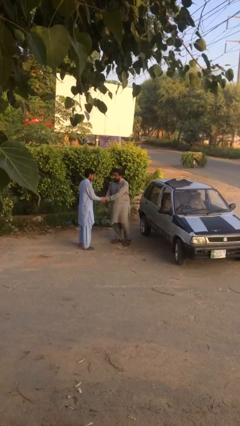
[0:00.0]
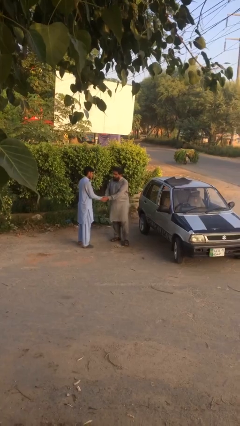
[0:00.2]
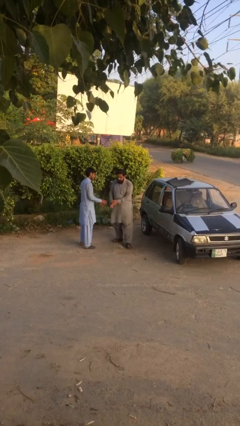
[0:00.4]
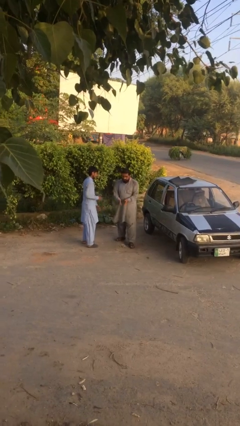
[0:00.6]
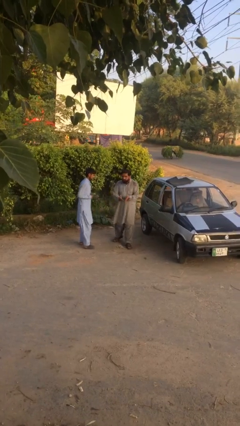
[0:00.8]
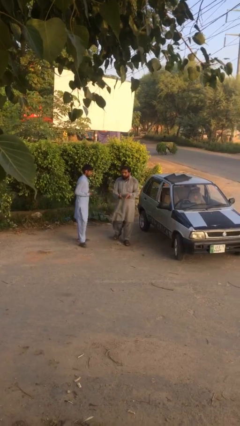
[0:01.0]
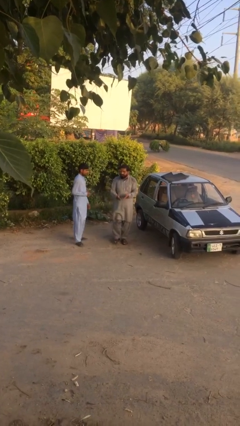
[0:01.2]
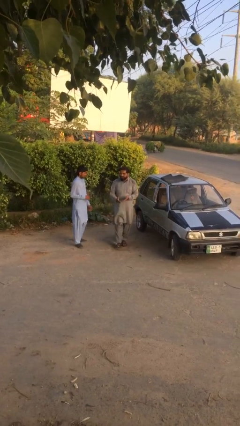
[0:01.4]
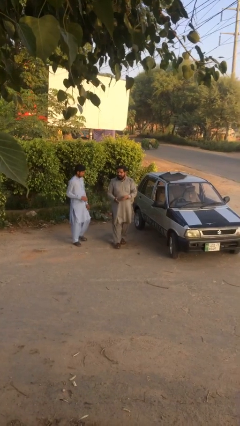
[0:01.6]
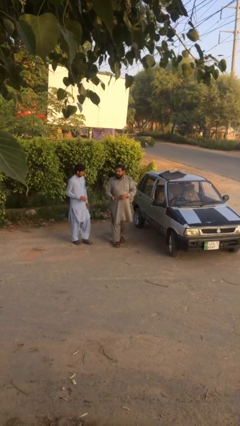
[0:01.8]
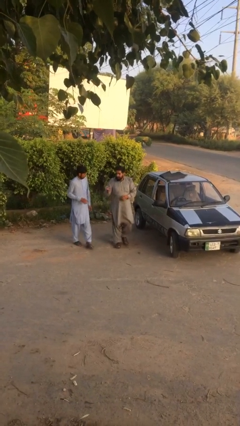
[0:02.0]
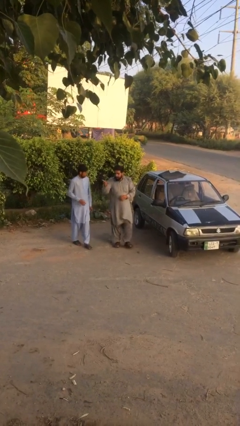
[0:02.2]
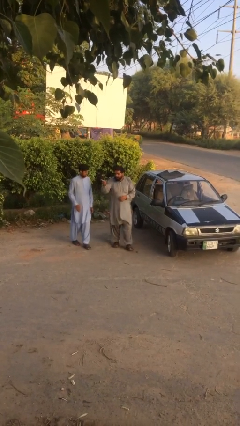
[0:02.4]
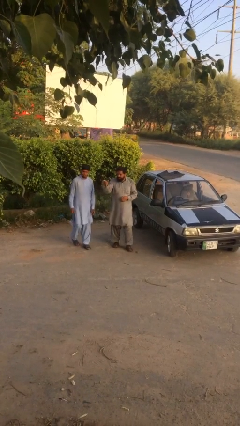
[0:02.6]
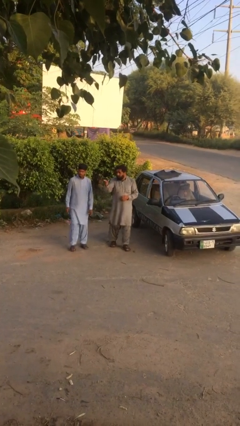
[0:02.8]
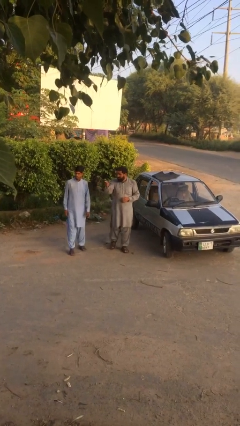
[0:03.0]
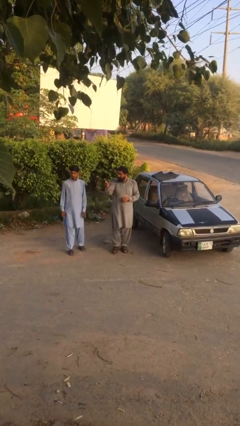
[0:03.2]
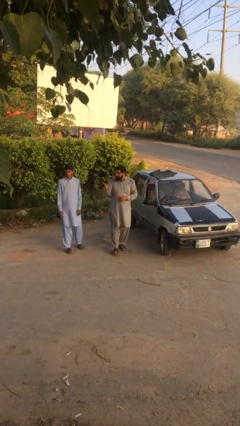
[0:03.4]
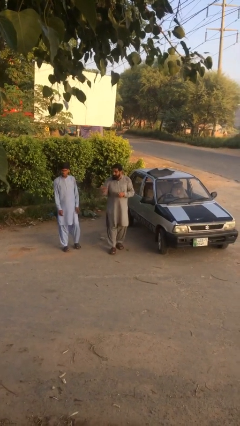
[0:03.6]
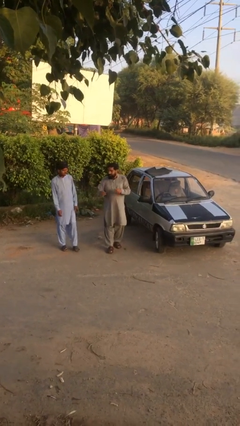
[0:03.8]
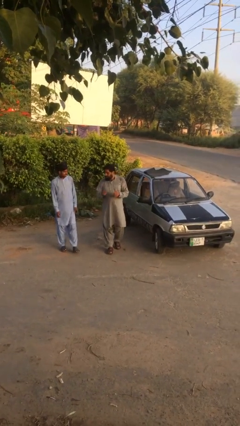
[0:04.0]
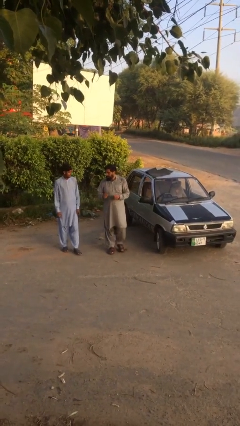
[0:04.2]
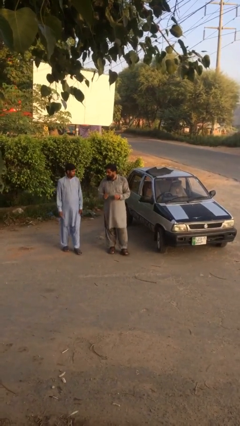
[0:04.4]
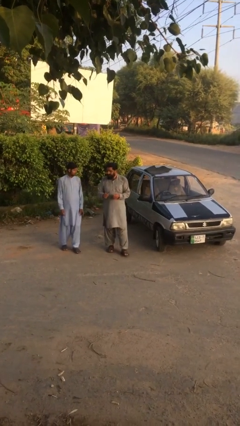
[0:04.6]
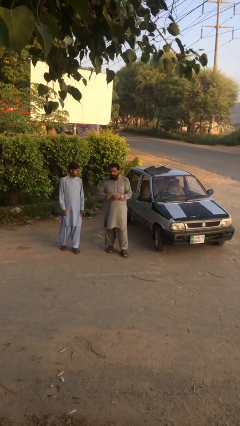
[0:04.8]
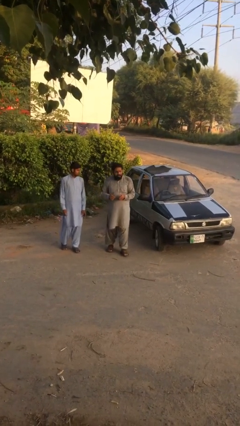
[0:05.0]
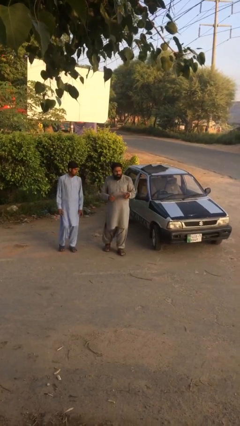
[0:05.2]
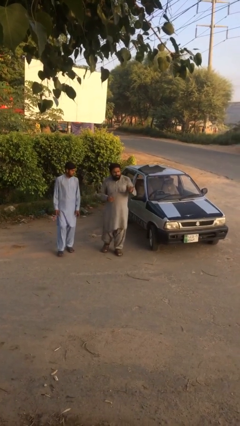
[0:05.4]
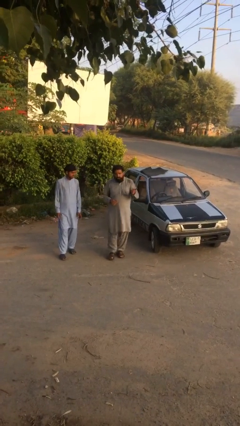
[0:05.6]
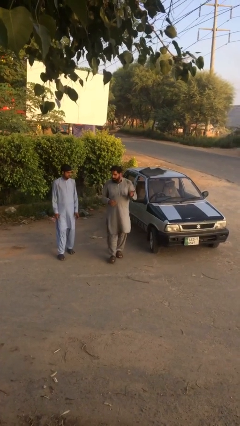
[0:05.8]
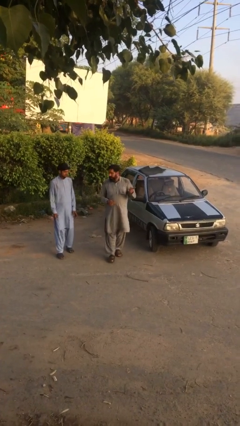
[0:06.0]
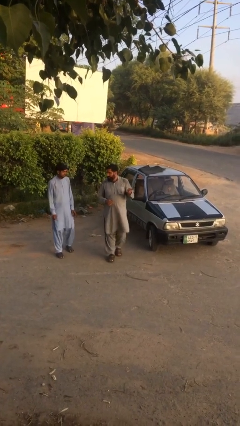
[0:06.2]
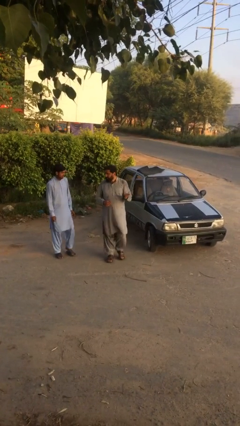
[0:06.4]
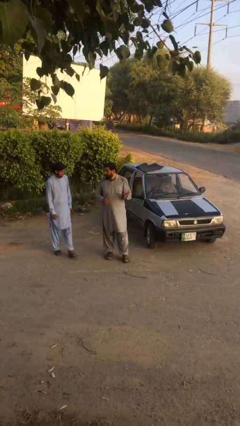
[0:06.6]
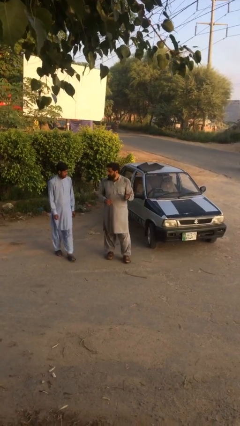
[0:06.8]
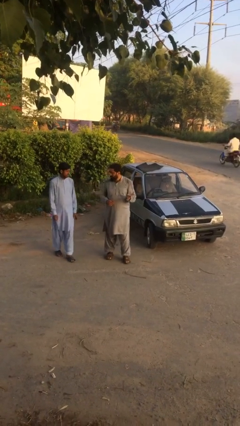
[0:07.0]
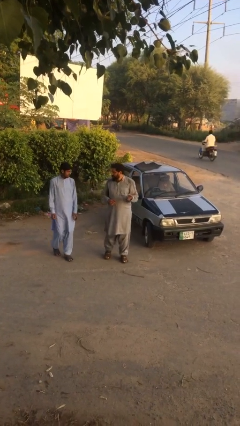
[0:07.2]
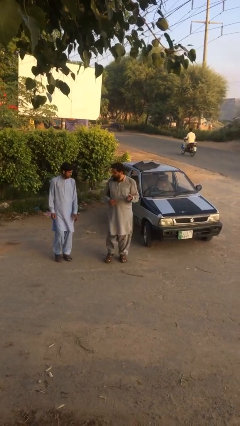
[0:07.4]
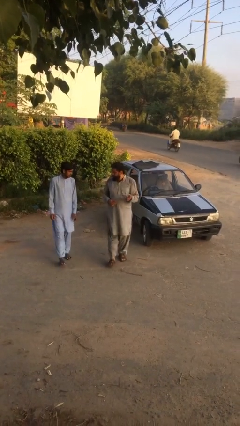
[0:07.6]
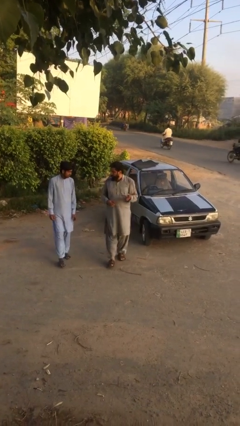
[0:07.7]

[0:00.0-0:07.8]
person talks to person

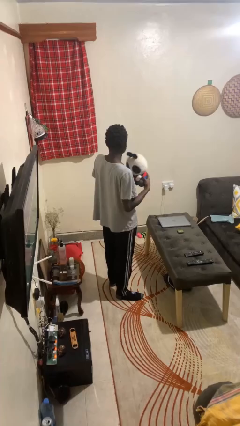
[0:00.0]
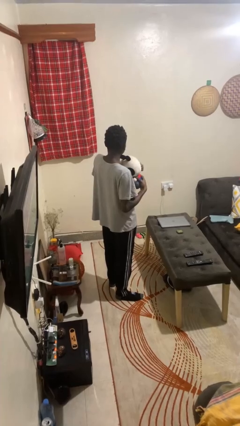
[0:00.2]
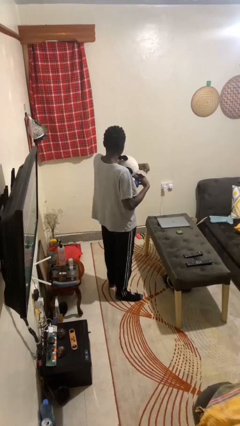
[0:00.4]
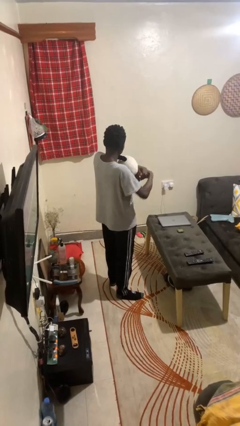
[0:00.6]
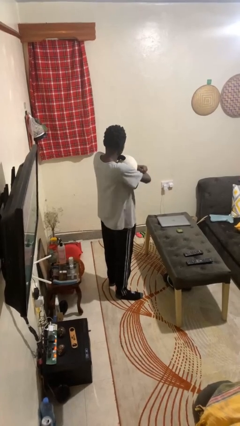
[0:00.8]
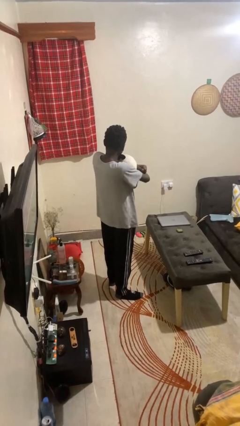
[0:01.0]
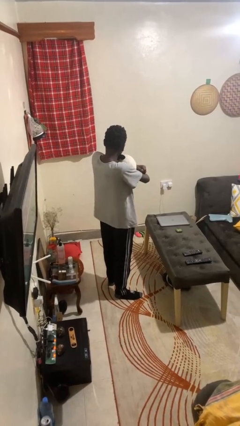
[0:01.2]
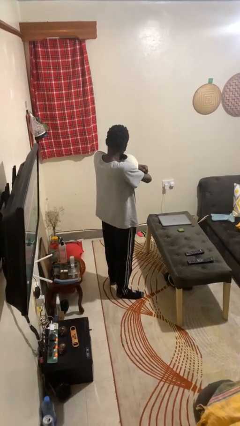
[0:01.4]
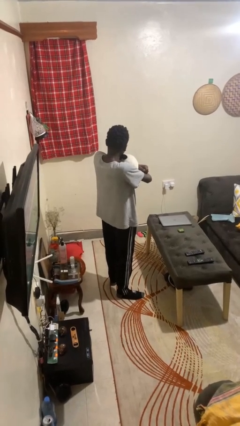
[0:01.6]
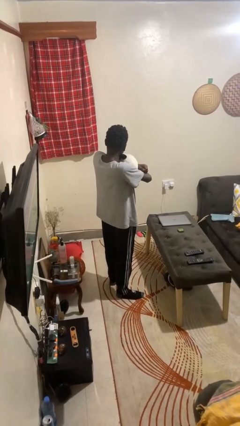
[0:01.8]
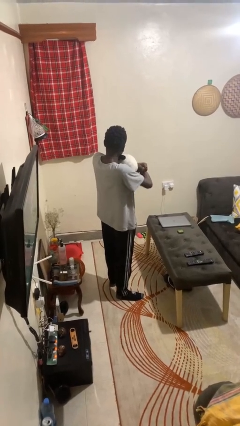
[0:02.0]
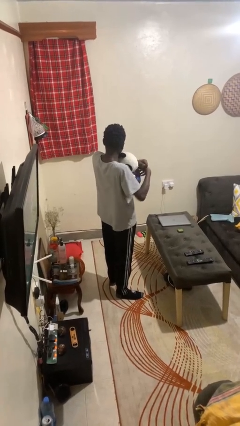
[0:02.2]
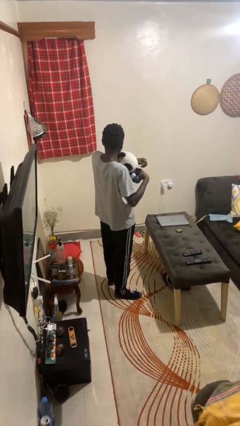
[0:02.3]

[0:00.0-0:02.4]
person hugs stuffed animal

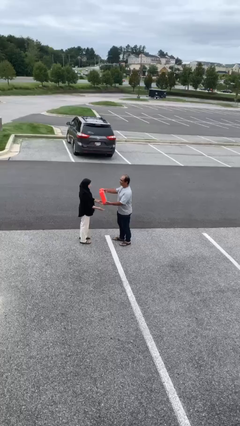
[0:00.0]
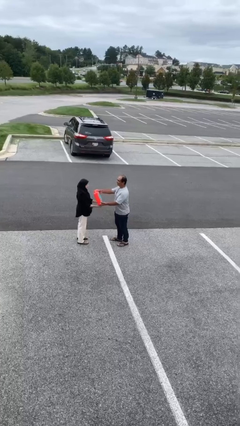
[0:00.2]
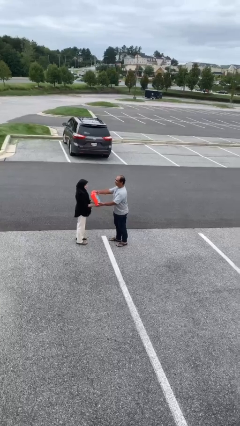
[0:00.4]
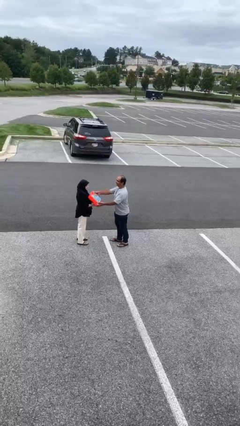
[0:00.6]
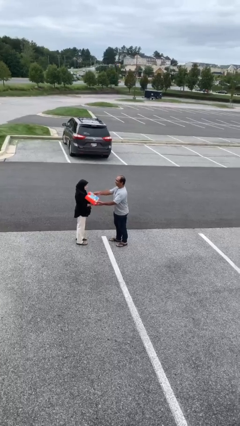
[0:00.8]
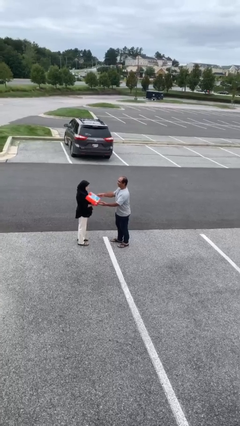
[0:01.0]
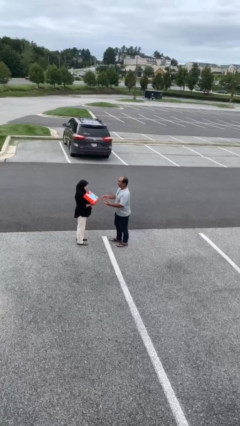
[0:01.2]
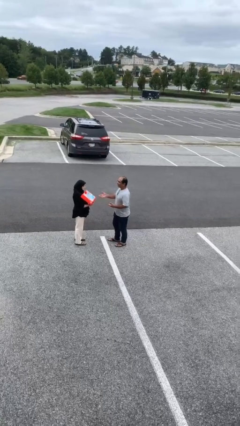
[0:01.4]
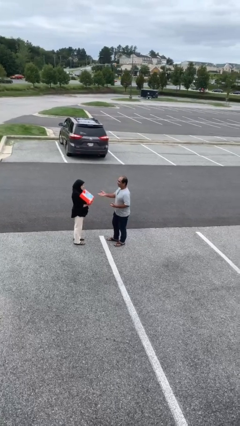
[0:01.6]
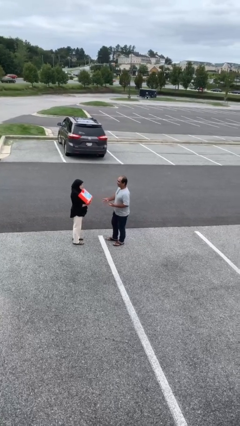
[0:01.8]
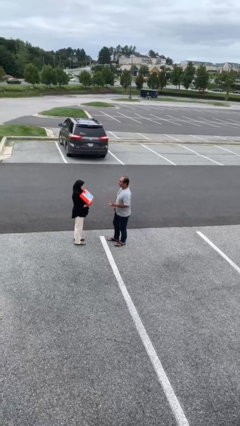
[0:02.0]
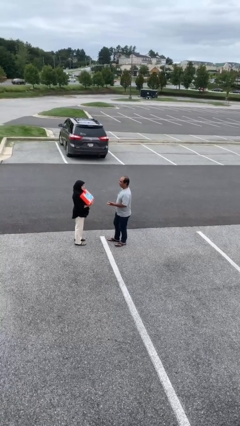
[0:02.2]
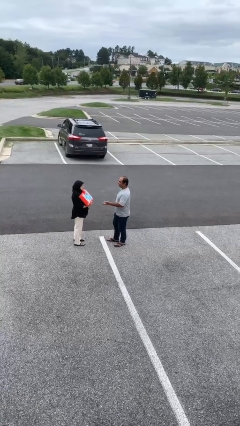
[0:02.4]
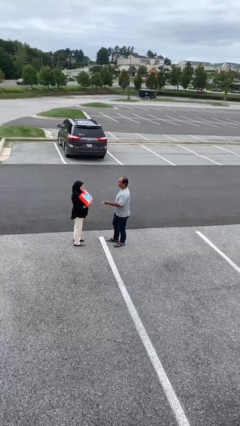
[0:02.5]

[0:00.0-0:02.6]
person transfers object to person

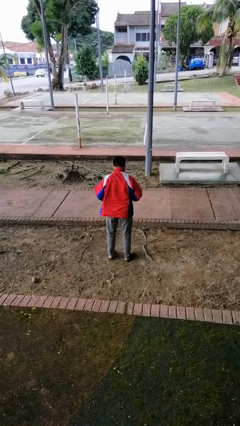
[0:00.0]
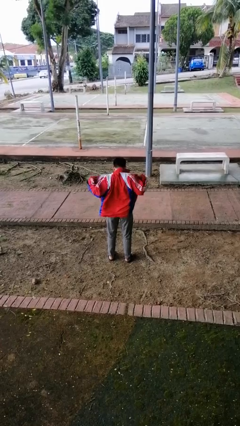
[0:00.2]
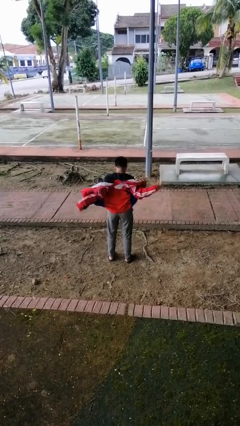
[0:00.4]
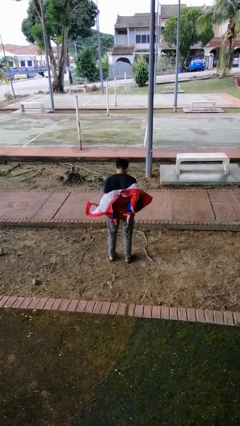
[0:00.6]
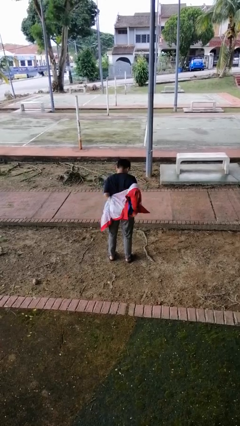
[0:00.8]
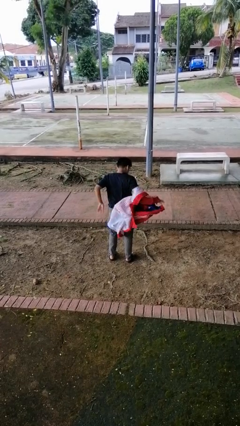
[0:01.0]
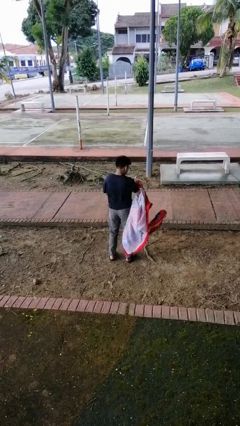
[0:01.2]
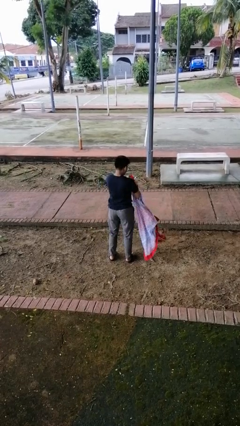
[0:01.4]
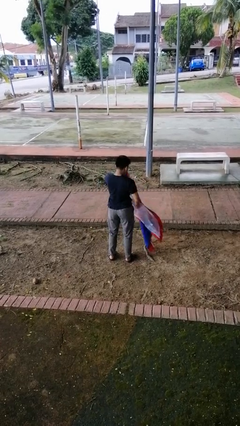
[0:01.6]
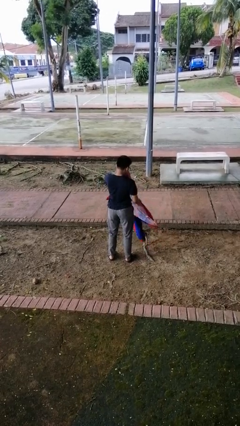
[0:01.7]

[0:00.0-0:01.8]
person takes off jacket

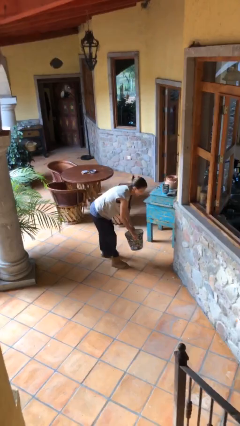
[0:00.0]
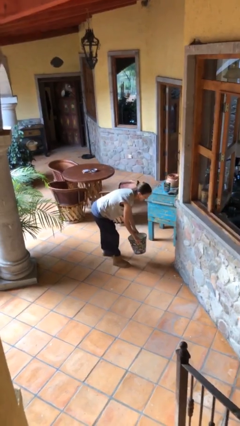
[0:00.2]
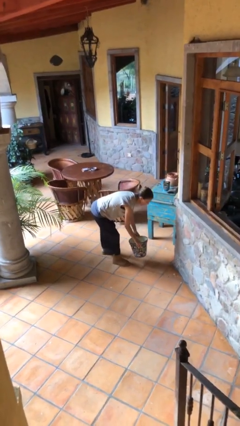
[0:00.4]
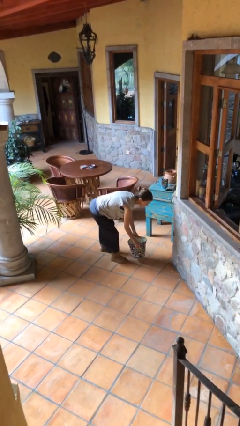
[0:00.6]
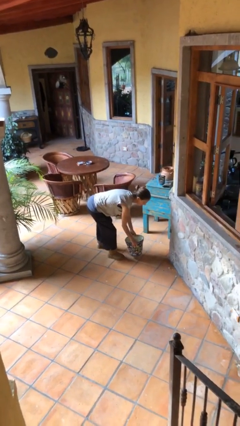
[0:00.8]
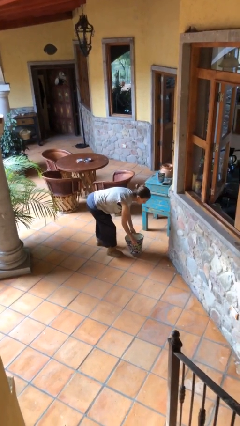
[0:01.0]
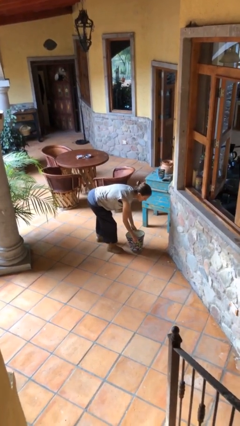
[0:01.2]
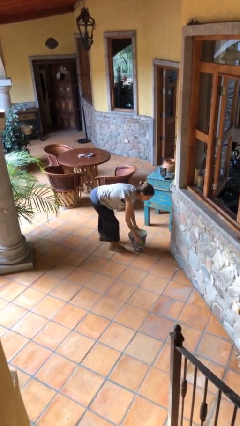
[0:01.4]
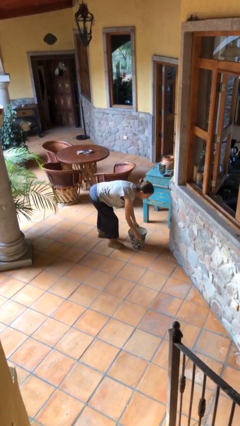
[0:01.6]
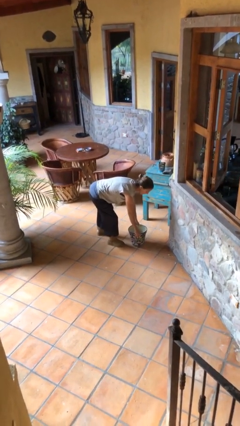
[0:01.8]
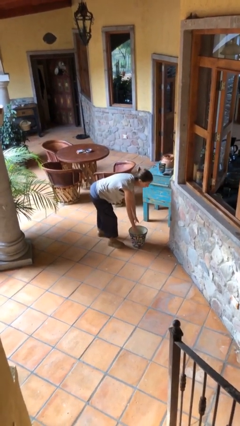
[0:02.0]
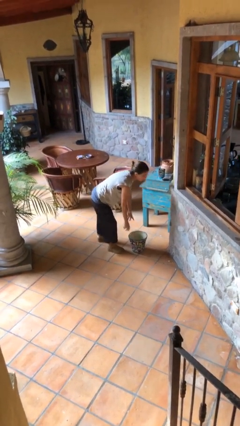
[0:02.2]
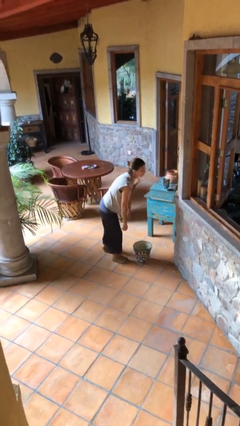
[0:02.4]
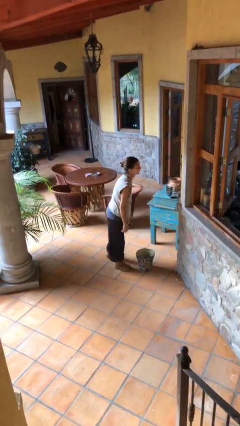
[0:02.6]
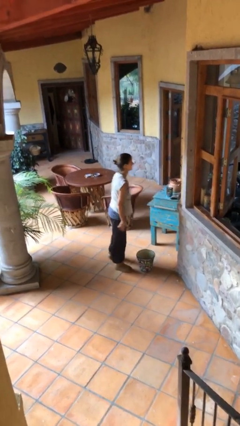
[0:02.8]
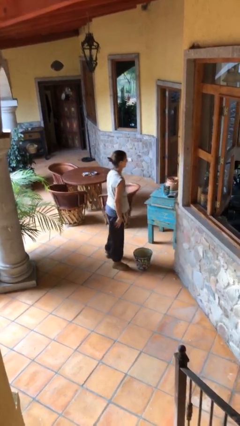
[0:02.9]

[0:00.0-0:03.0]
person puts down object on floor
